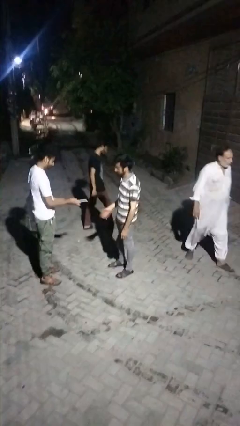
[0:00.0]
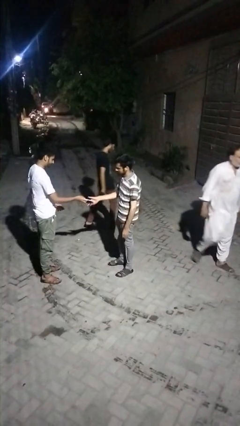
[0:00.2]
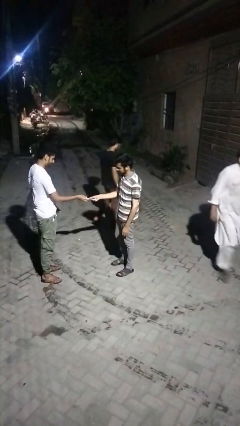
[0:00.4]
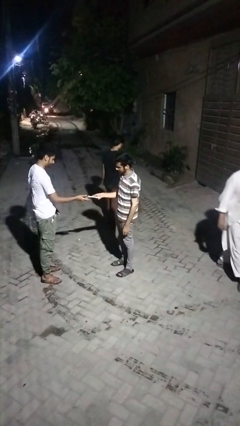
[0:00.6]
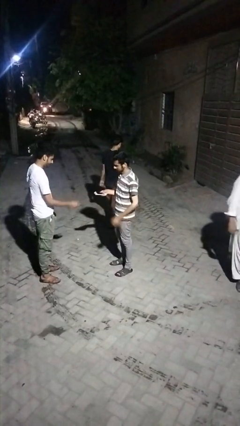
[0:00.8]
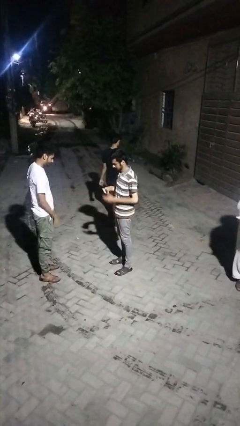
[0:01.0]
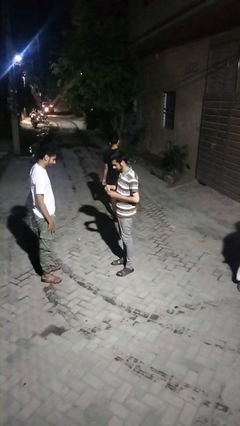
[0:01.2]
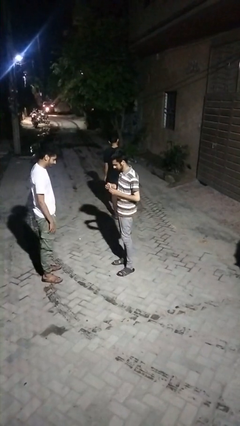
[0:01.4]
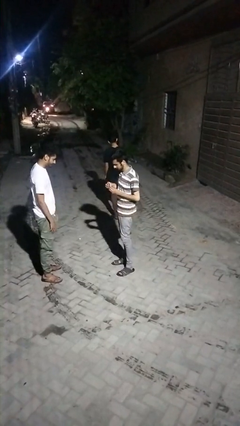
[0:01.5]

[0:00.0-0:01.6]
person transfers object to person

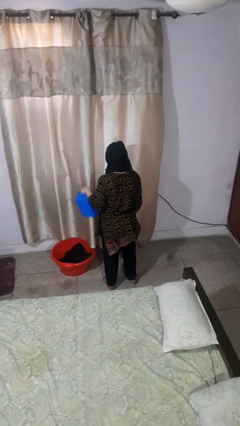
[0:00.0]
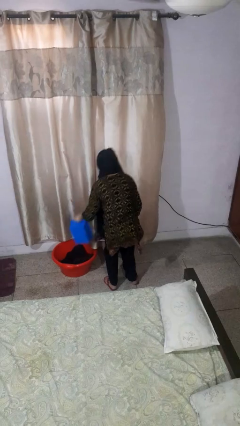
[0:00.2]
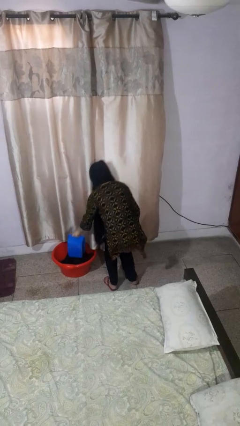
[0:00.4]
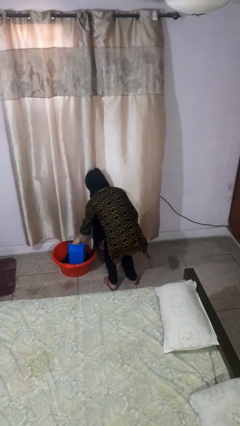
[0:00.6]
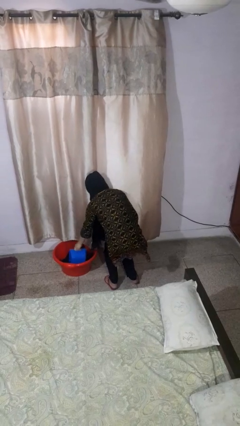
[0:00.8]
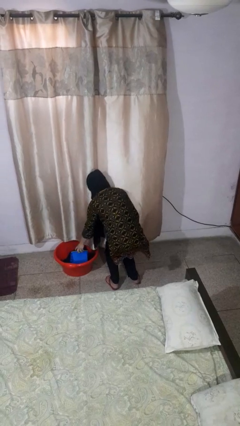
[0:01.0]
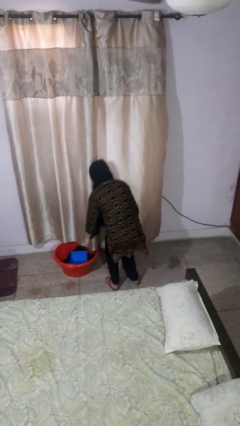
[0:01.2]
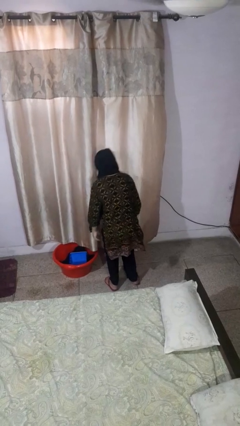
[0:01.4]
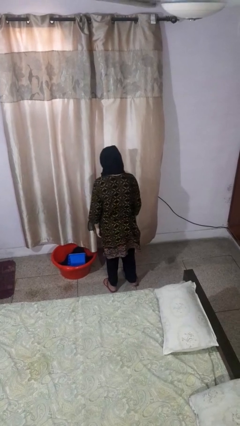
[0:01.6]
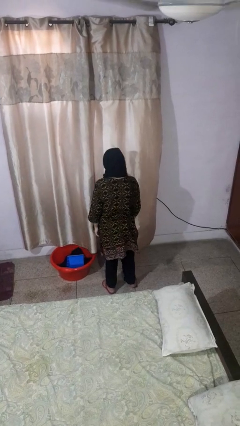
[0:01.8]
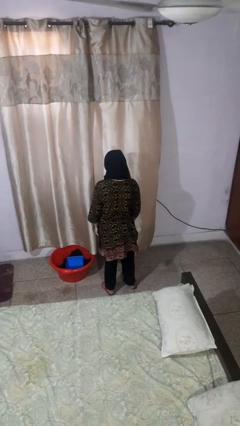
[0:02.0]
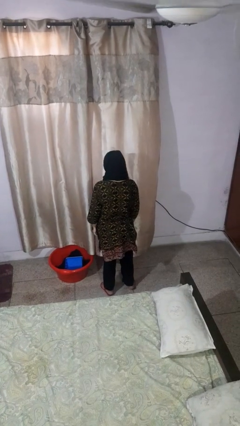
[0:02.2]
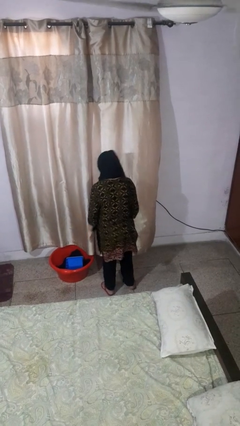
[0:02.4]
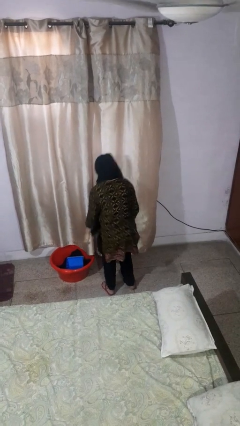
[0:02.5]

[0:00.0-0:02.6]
person puts object into basket

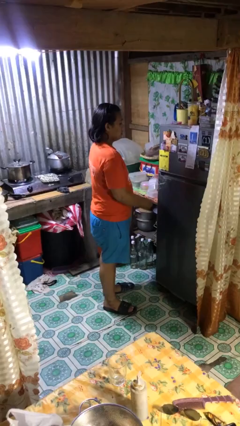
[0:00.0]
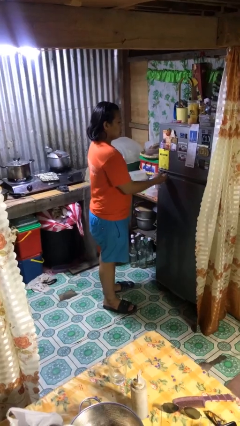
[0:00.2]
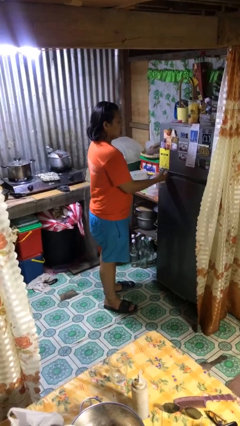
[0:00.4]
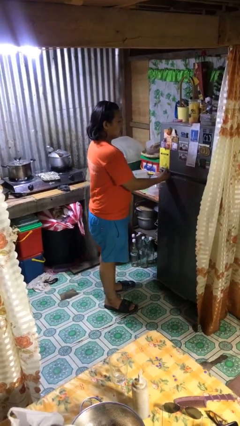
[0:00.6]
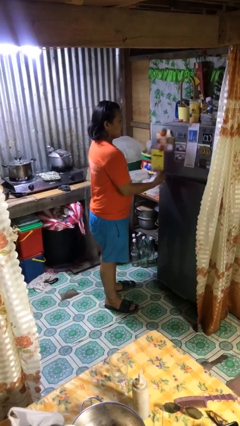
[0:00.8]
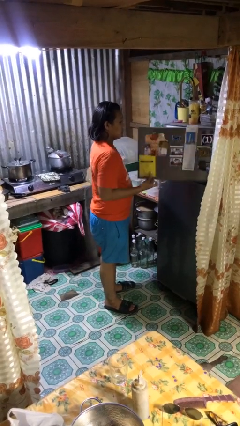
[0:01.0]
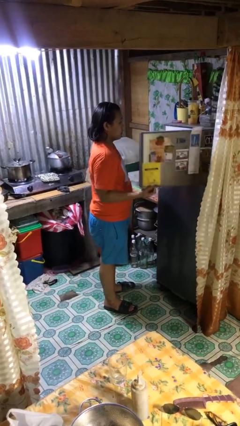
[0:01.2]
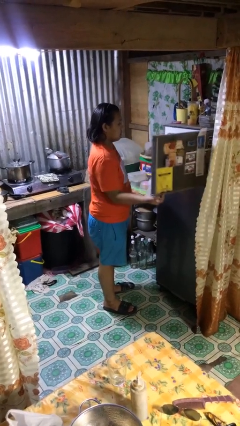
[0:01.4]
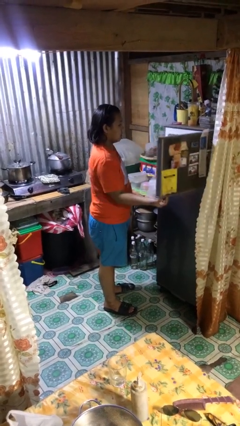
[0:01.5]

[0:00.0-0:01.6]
person opens refrigerator

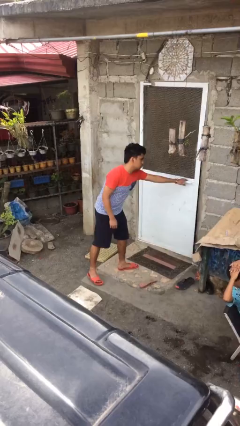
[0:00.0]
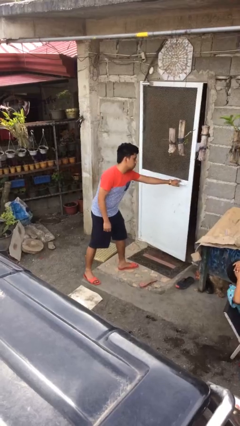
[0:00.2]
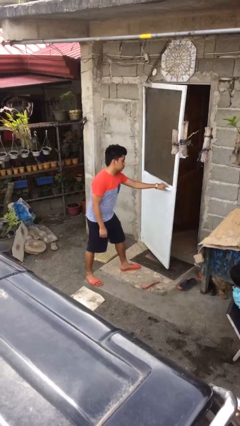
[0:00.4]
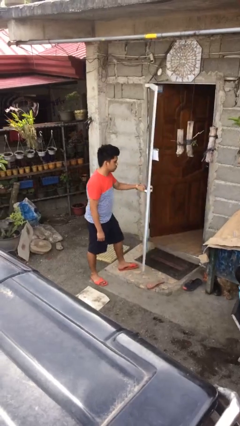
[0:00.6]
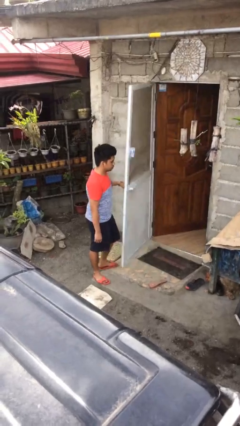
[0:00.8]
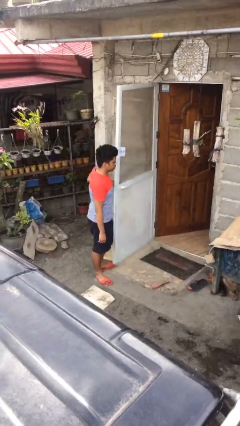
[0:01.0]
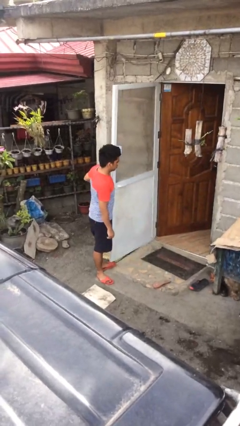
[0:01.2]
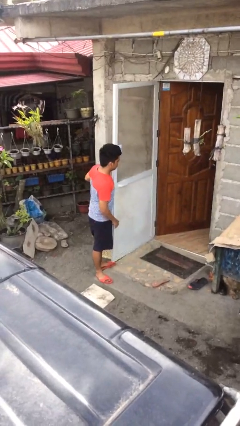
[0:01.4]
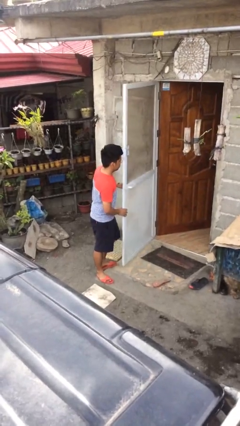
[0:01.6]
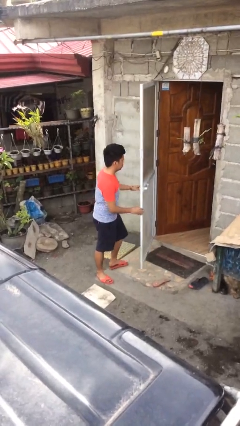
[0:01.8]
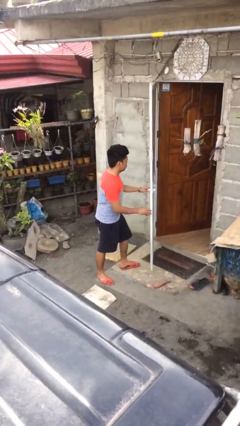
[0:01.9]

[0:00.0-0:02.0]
person opens facility door

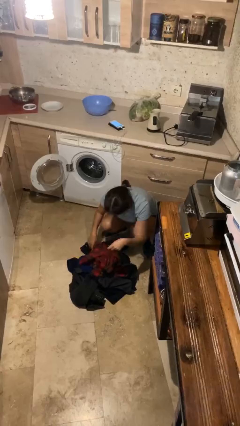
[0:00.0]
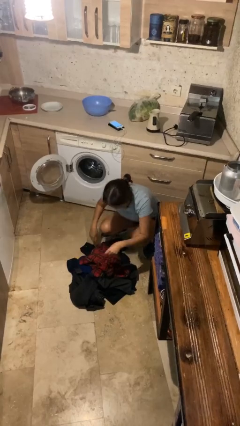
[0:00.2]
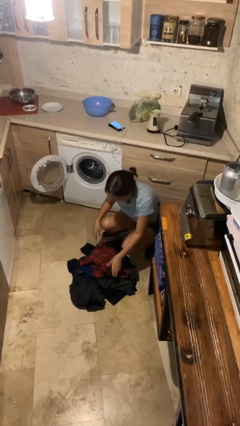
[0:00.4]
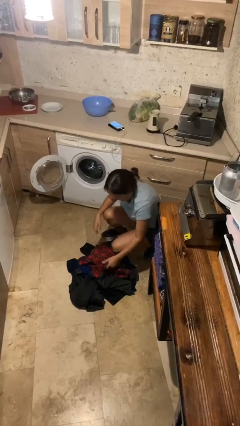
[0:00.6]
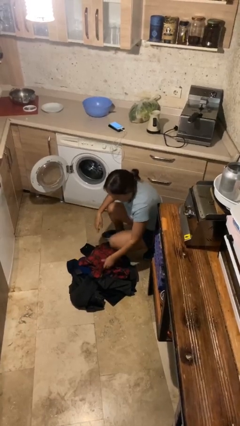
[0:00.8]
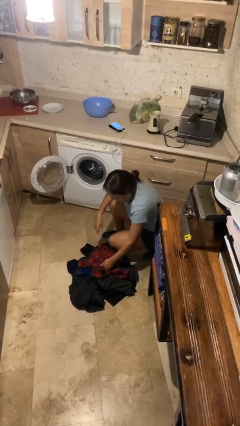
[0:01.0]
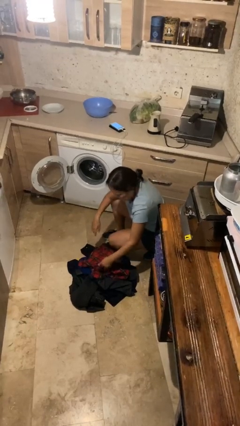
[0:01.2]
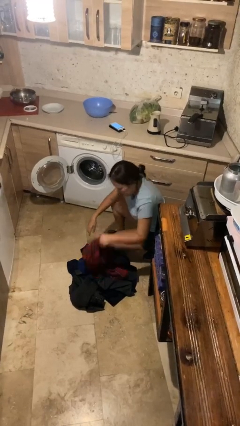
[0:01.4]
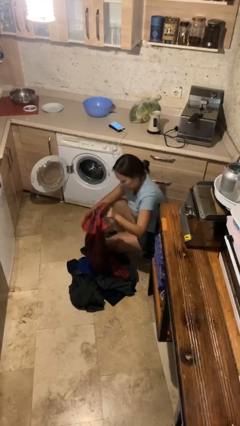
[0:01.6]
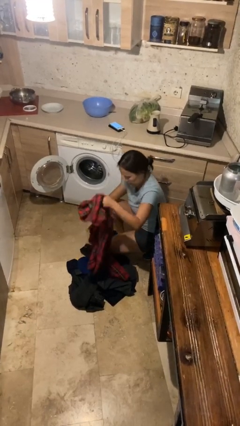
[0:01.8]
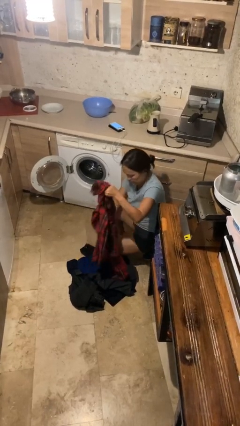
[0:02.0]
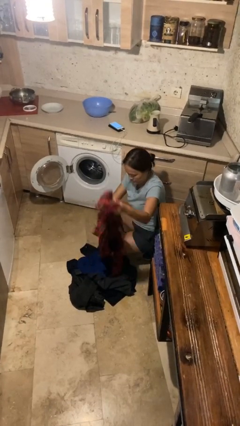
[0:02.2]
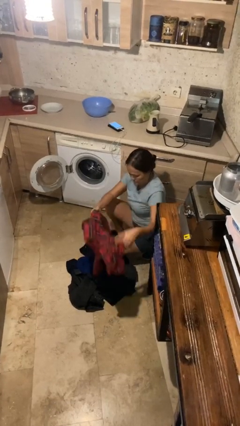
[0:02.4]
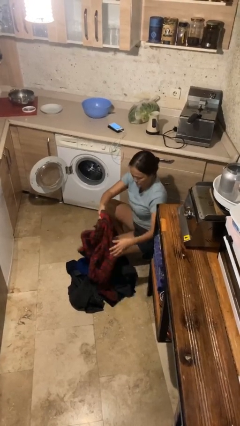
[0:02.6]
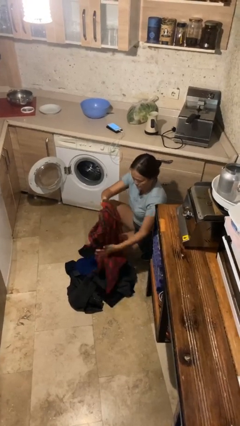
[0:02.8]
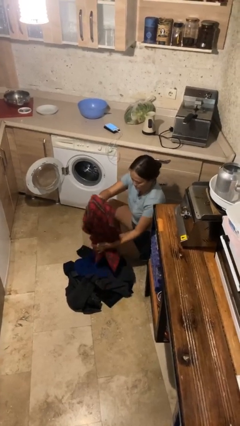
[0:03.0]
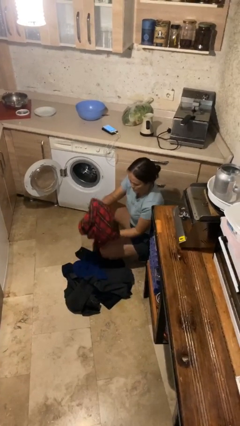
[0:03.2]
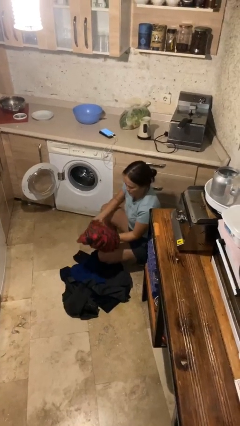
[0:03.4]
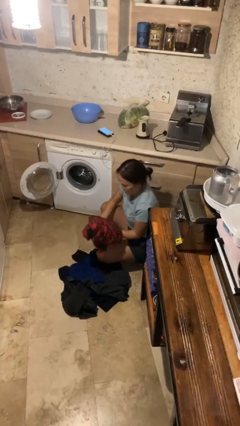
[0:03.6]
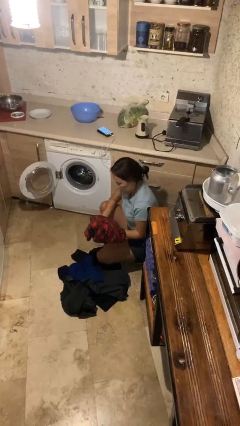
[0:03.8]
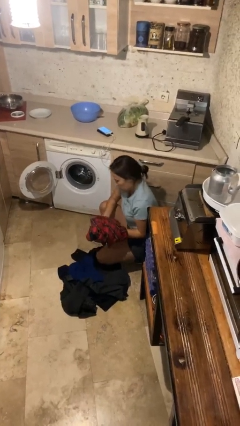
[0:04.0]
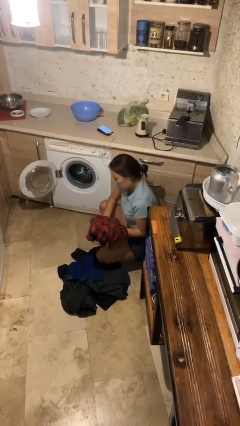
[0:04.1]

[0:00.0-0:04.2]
person folds shirt

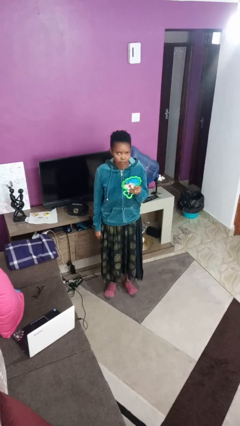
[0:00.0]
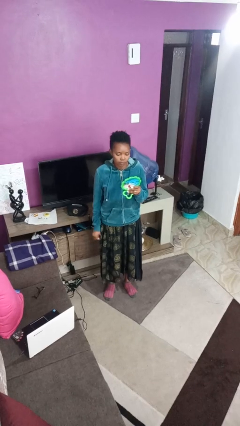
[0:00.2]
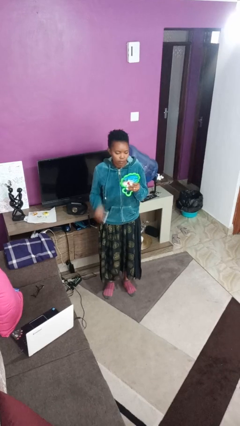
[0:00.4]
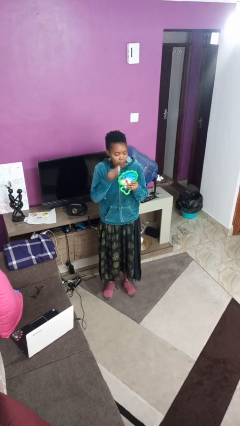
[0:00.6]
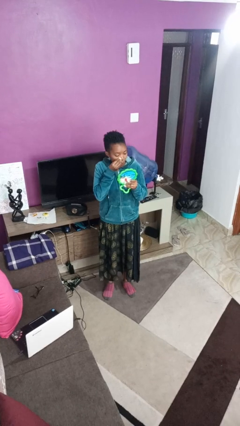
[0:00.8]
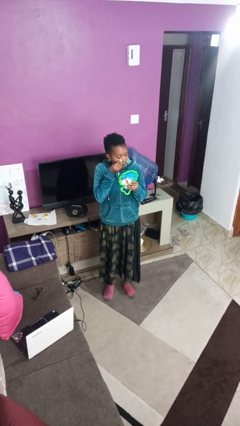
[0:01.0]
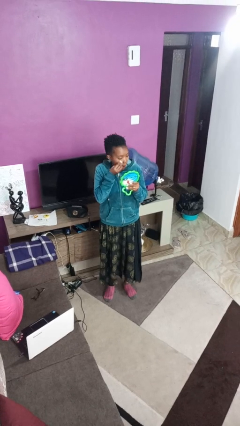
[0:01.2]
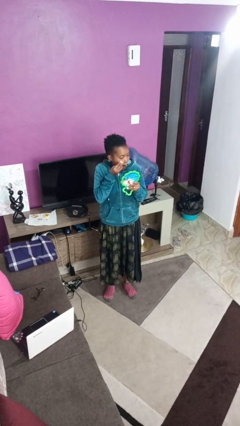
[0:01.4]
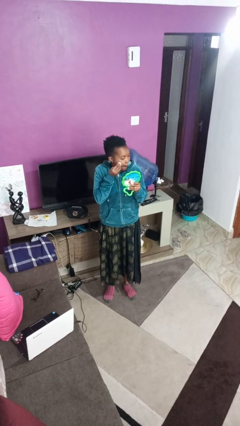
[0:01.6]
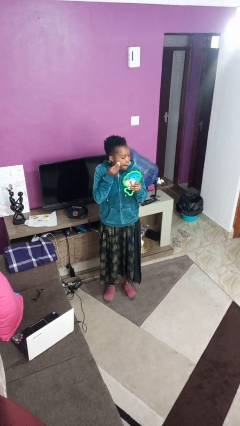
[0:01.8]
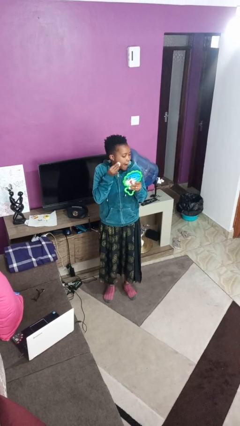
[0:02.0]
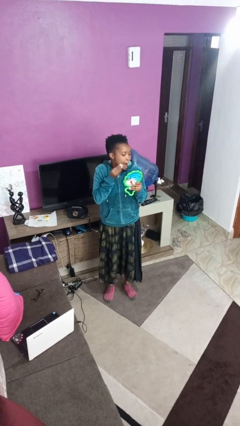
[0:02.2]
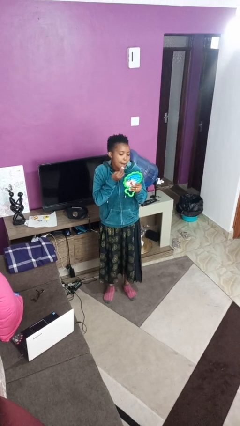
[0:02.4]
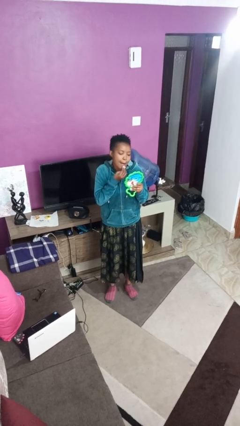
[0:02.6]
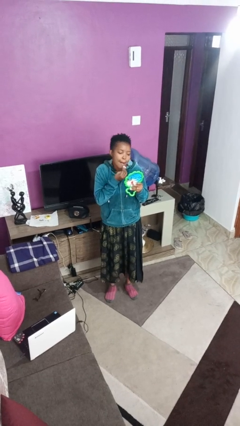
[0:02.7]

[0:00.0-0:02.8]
person applies foundation makeup

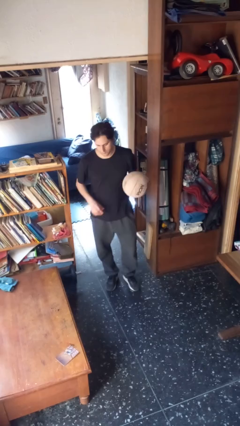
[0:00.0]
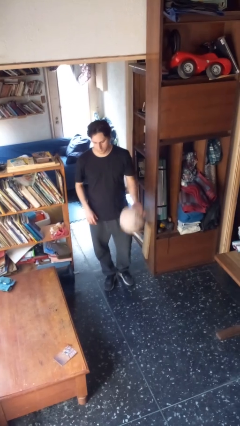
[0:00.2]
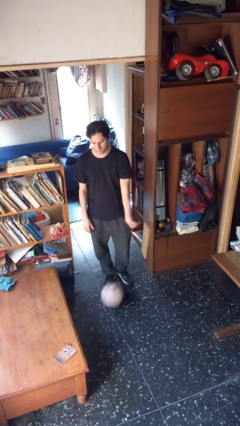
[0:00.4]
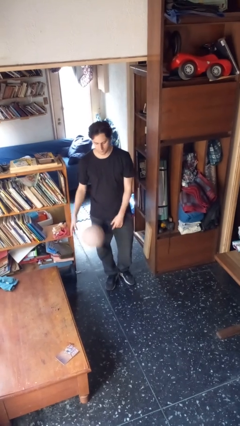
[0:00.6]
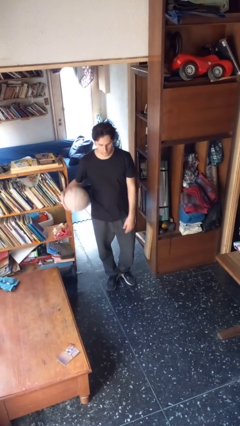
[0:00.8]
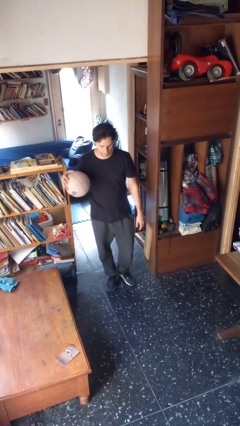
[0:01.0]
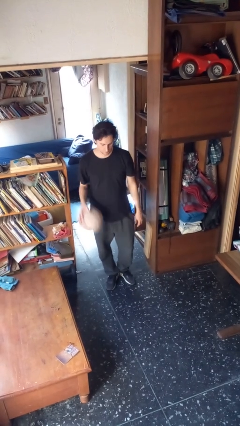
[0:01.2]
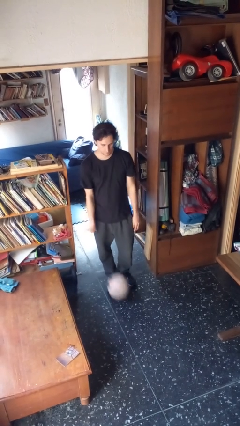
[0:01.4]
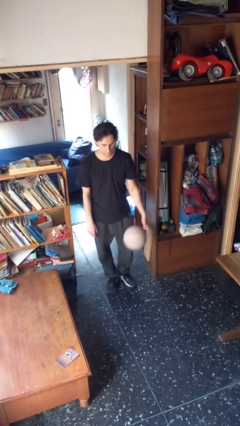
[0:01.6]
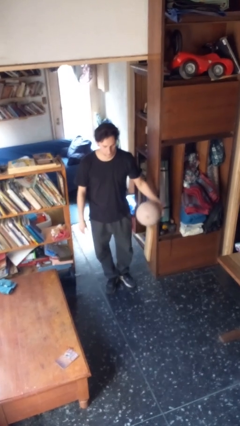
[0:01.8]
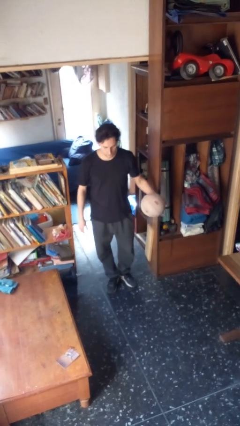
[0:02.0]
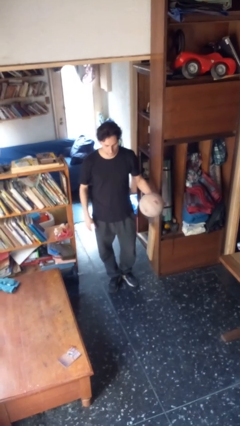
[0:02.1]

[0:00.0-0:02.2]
person bounces ball on floor

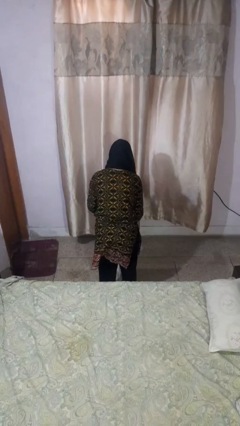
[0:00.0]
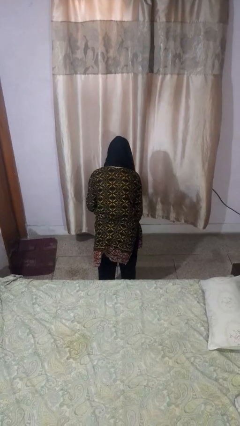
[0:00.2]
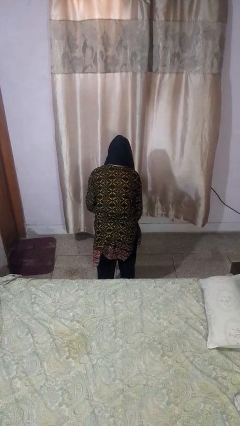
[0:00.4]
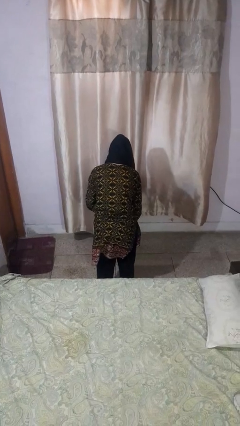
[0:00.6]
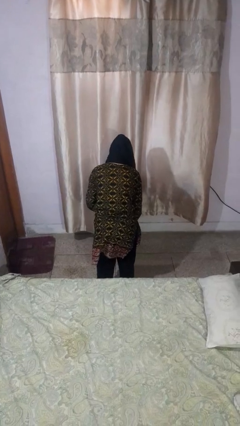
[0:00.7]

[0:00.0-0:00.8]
person picks up object from floor
